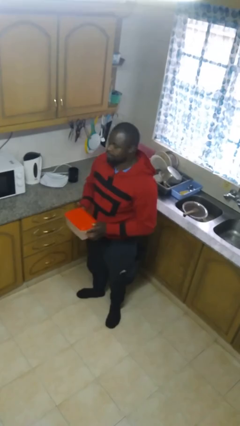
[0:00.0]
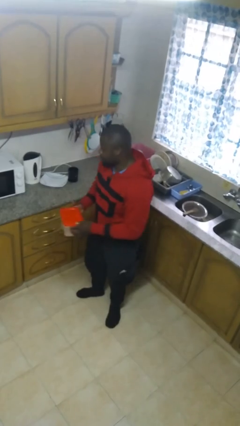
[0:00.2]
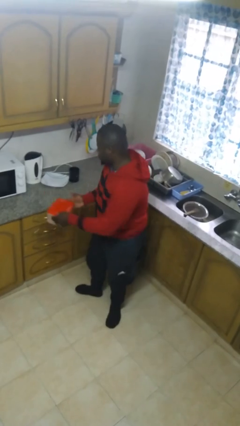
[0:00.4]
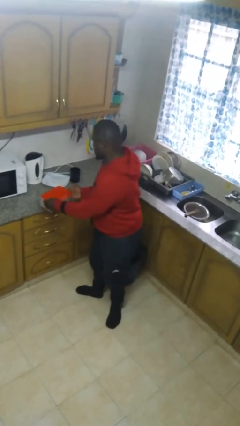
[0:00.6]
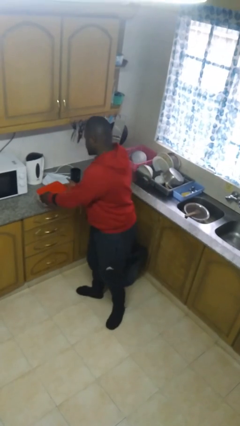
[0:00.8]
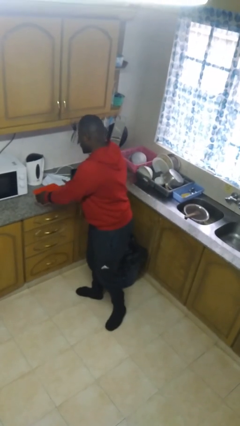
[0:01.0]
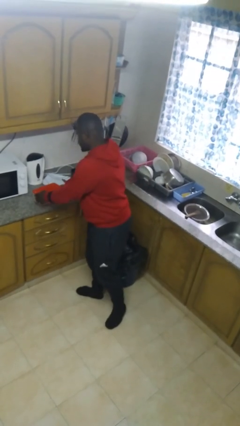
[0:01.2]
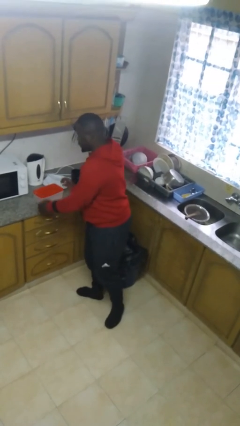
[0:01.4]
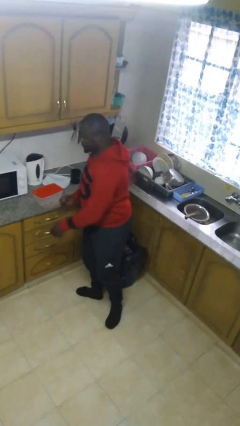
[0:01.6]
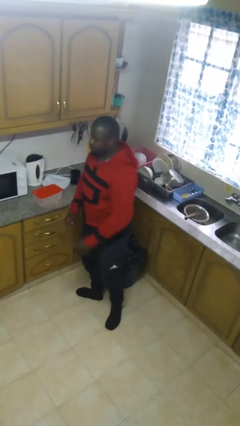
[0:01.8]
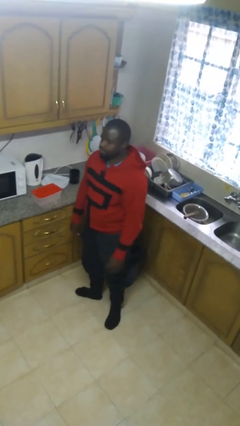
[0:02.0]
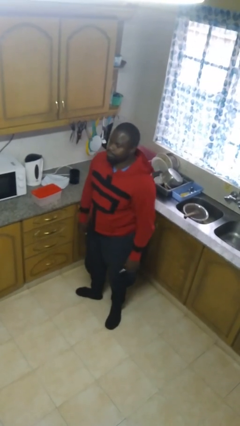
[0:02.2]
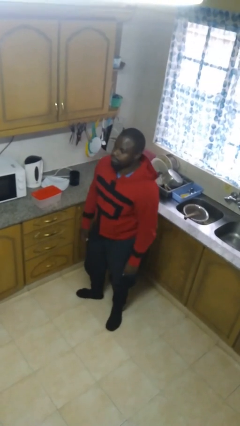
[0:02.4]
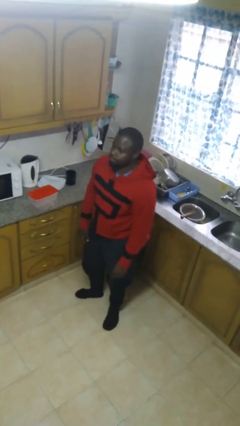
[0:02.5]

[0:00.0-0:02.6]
person puts down object on countertop

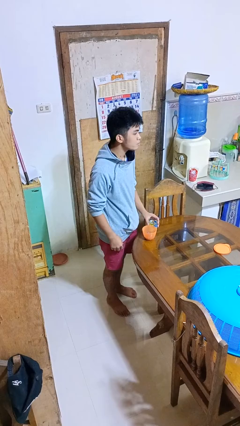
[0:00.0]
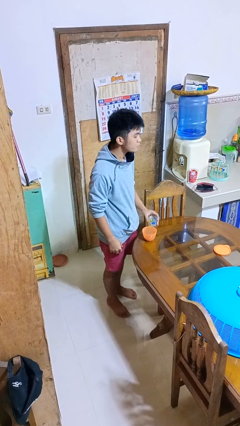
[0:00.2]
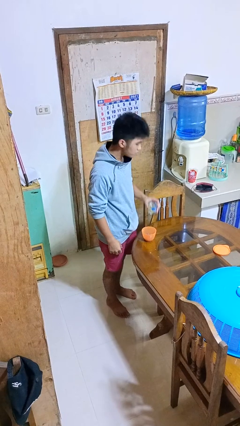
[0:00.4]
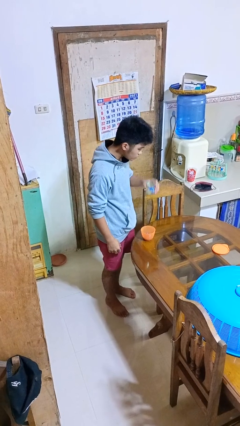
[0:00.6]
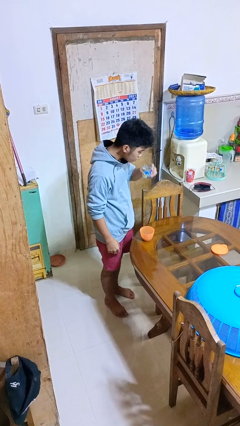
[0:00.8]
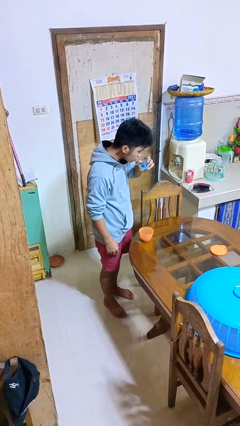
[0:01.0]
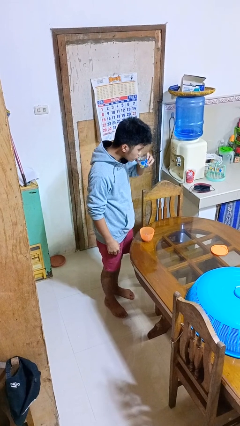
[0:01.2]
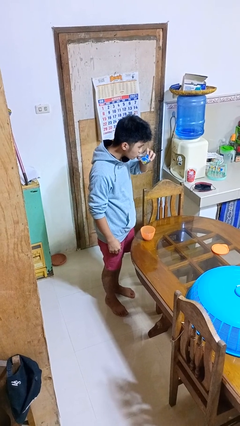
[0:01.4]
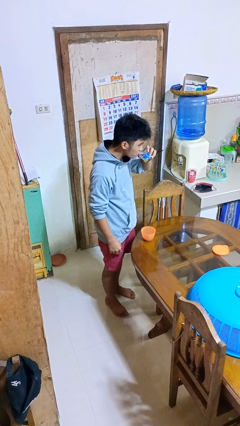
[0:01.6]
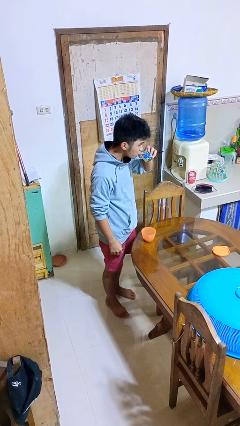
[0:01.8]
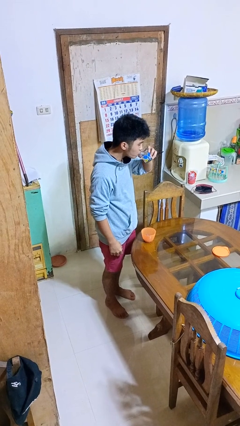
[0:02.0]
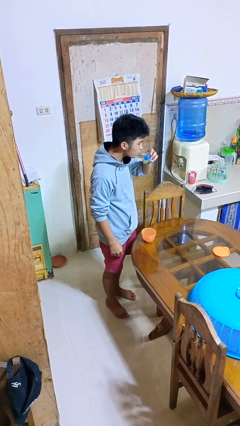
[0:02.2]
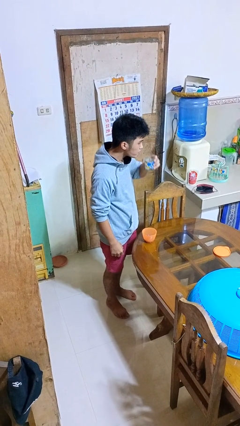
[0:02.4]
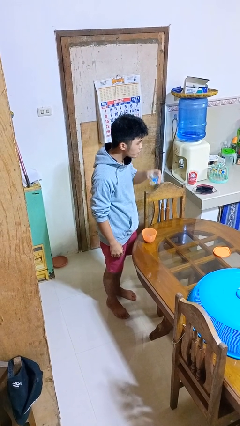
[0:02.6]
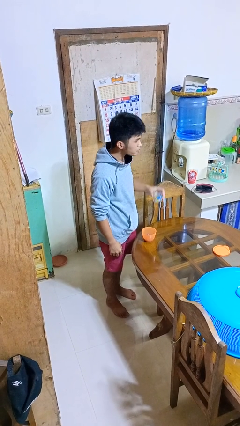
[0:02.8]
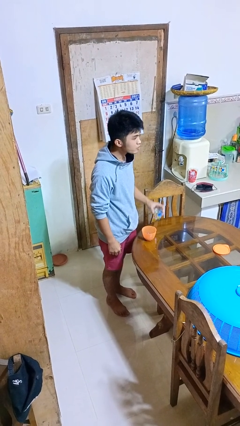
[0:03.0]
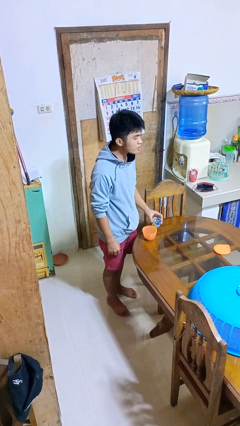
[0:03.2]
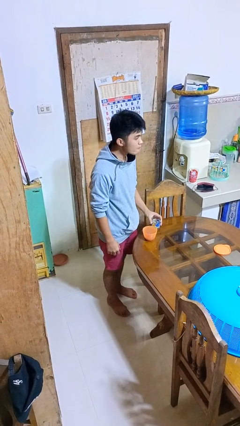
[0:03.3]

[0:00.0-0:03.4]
person drinks from cup

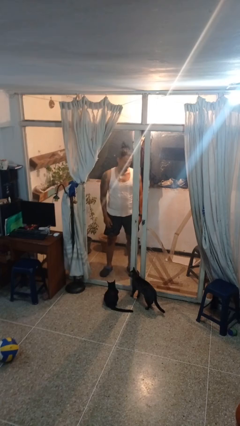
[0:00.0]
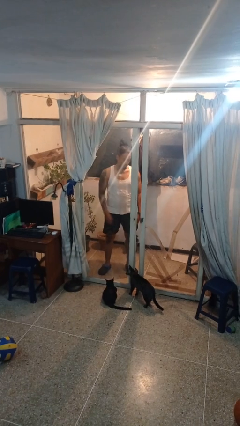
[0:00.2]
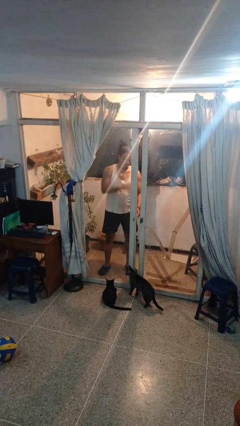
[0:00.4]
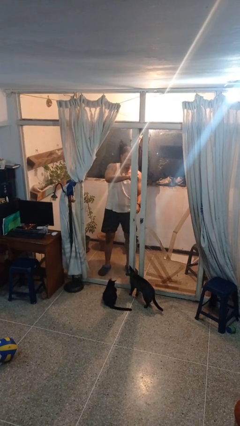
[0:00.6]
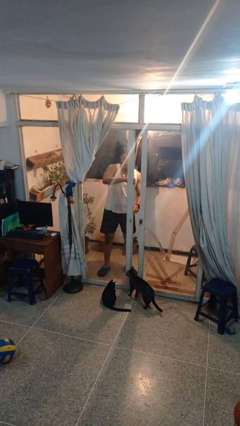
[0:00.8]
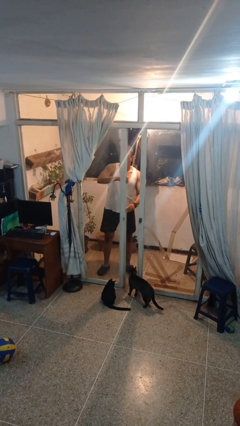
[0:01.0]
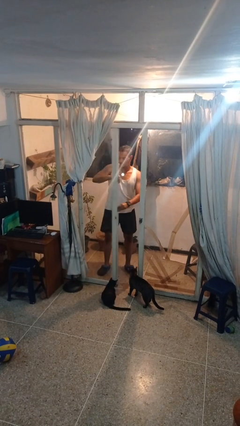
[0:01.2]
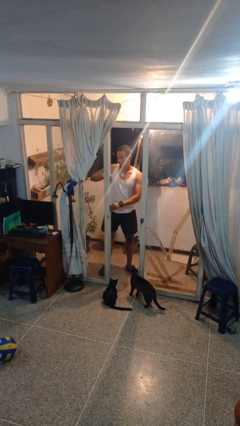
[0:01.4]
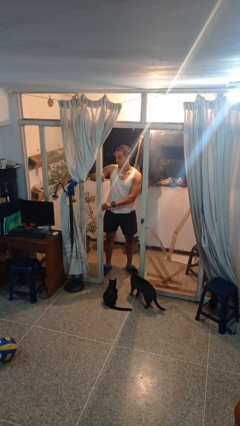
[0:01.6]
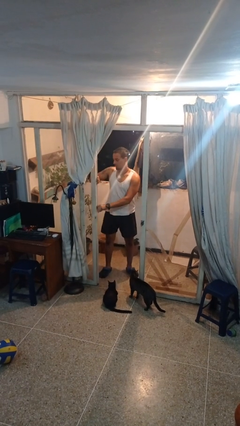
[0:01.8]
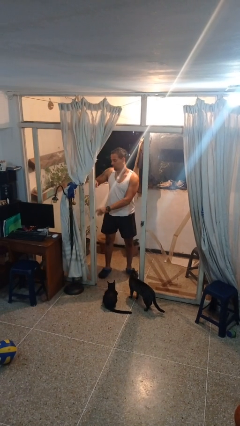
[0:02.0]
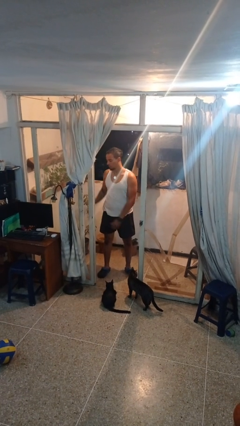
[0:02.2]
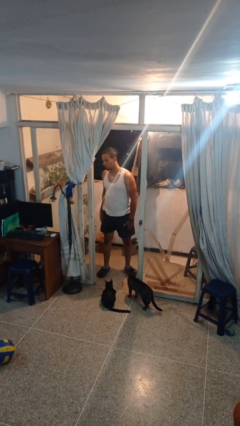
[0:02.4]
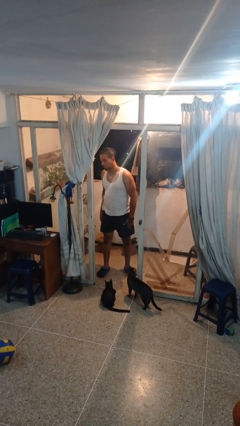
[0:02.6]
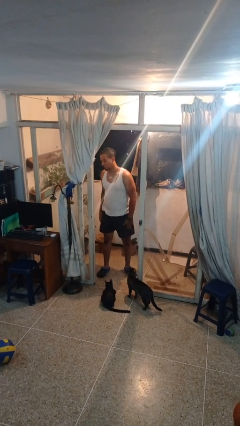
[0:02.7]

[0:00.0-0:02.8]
person opens sliding door

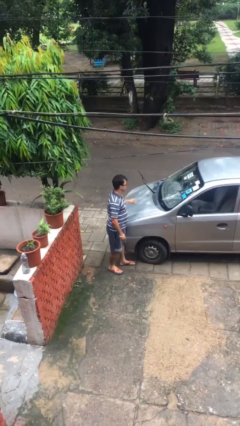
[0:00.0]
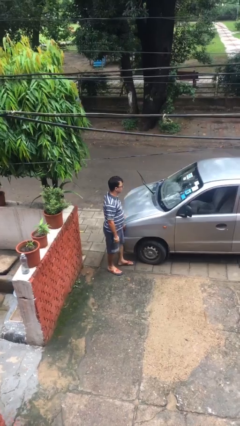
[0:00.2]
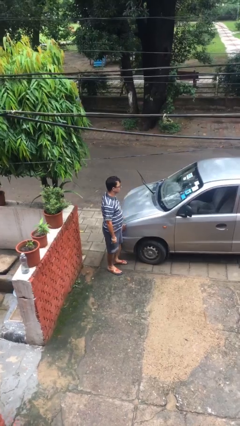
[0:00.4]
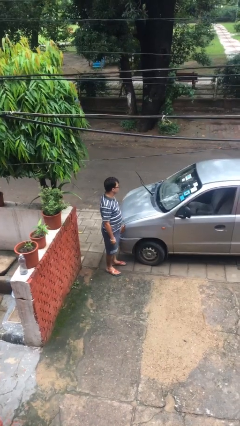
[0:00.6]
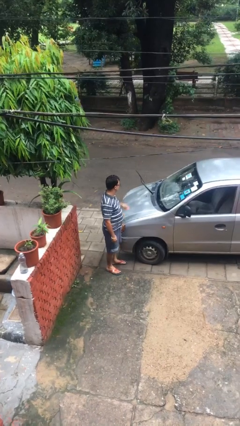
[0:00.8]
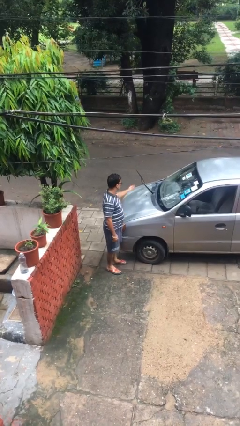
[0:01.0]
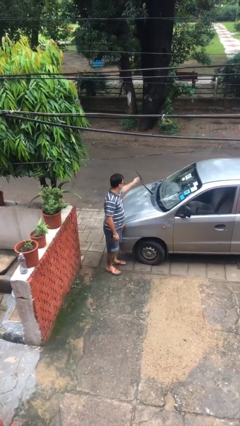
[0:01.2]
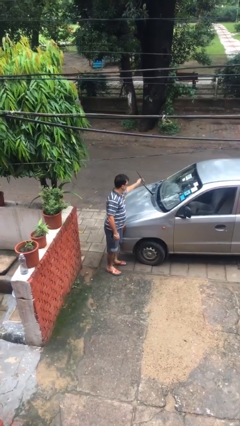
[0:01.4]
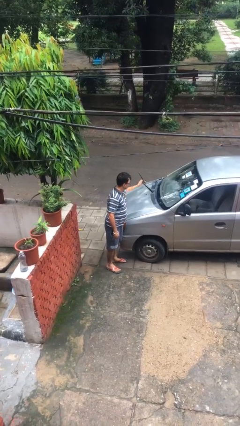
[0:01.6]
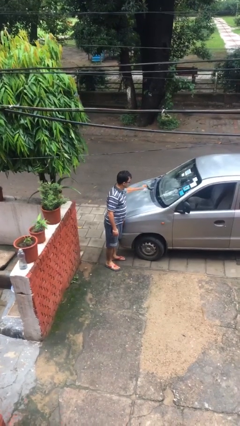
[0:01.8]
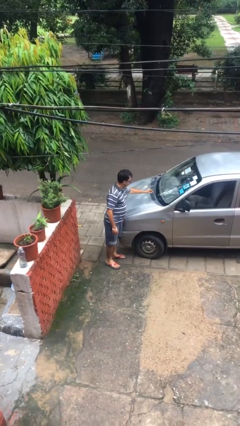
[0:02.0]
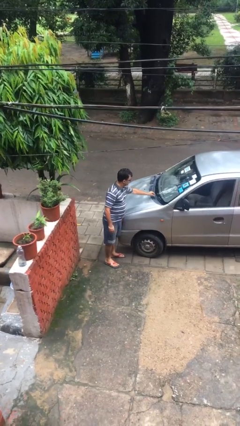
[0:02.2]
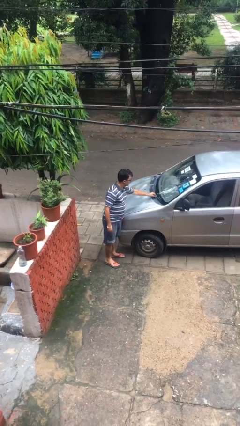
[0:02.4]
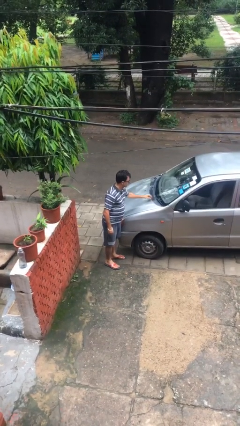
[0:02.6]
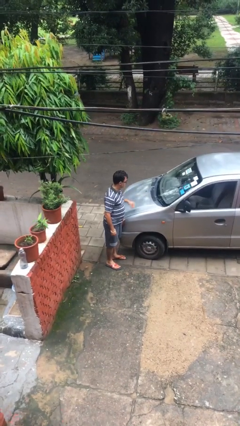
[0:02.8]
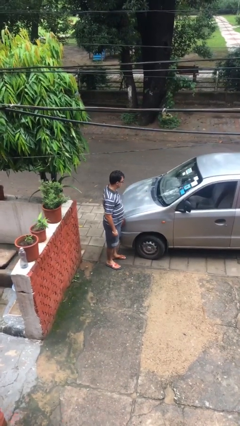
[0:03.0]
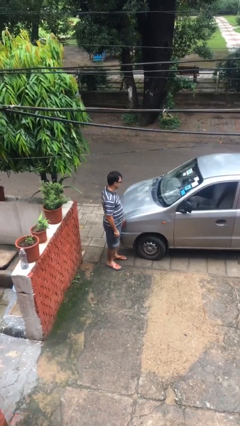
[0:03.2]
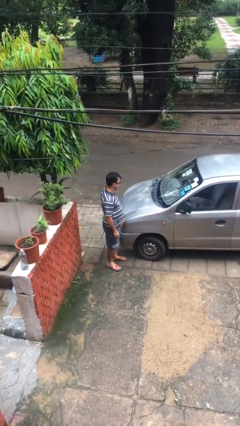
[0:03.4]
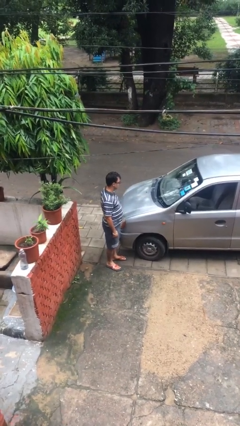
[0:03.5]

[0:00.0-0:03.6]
person flips down car wipers

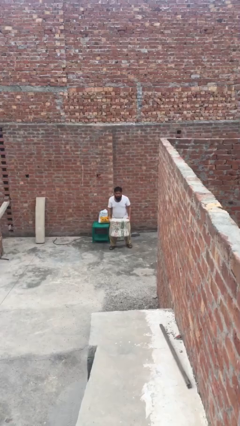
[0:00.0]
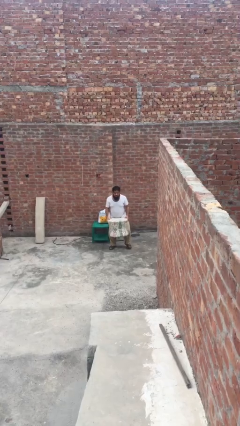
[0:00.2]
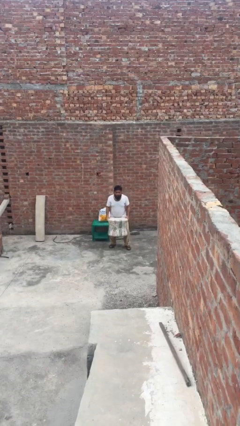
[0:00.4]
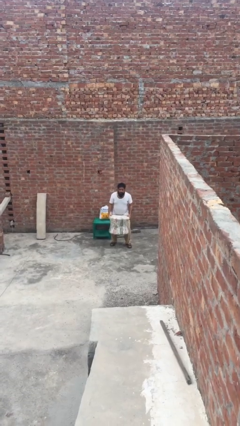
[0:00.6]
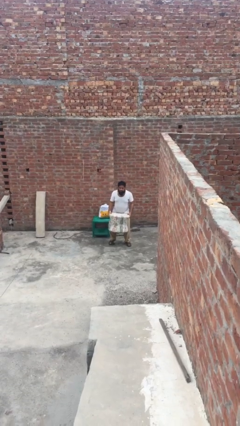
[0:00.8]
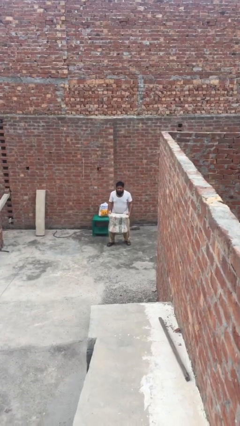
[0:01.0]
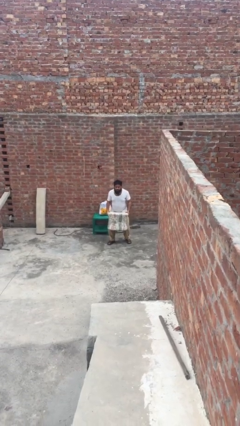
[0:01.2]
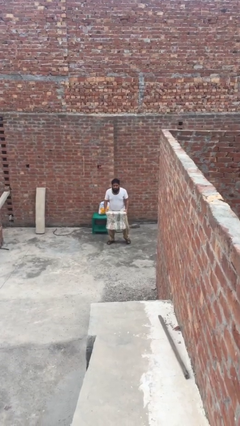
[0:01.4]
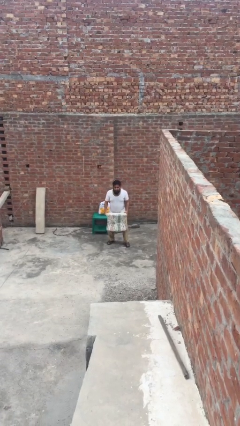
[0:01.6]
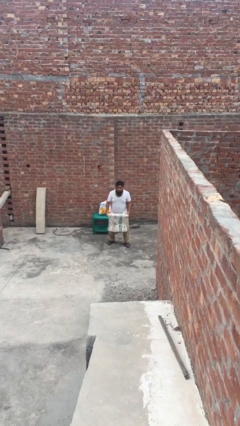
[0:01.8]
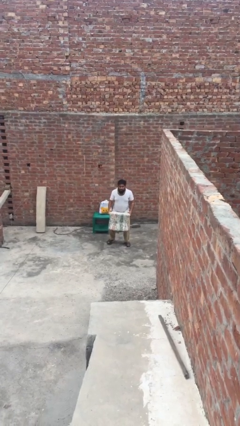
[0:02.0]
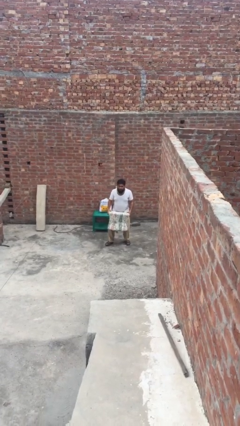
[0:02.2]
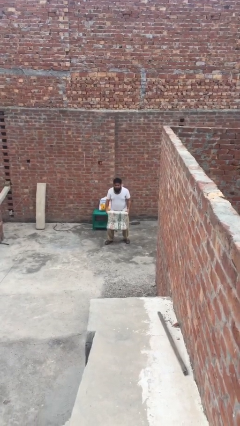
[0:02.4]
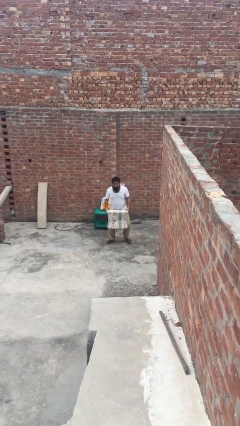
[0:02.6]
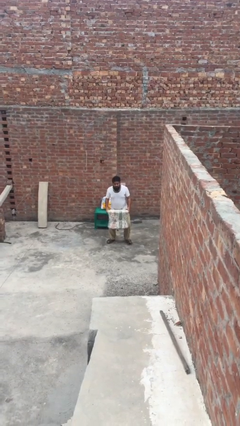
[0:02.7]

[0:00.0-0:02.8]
person carries heavy object

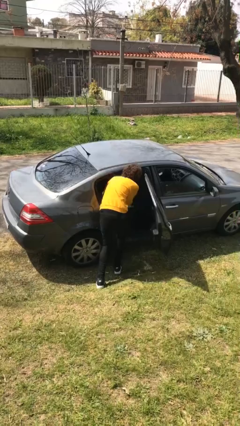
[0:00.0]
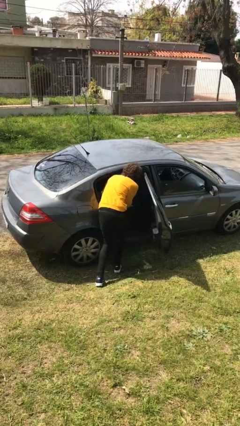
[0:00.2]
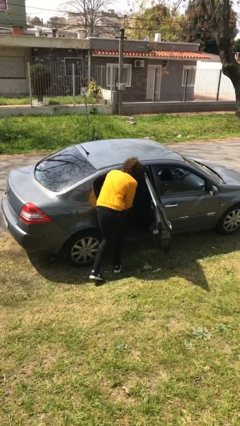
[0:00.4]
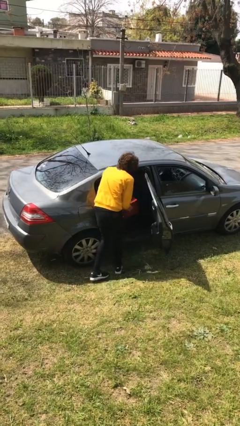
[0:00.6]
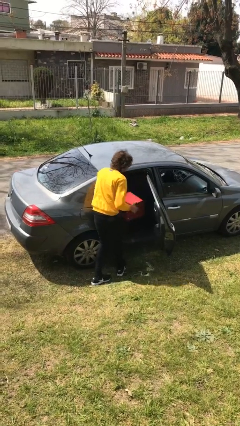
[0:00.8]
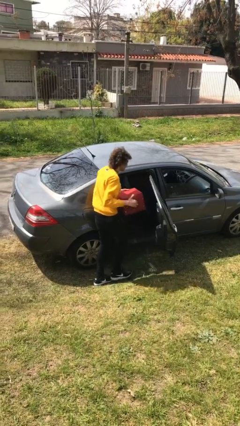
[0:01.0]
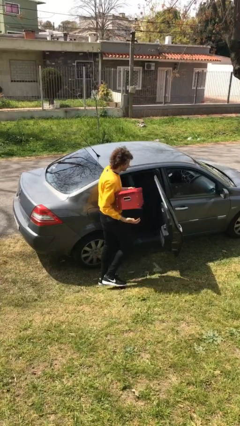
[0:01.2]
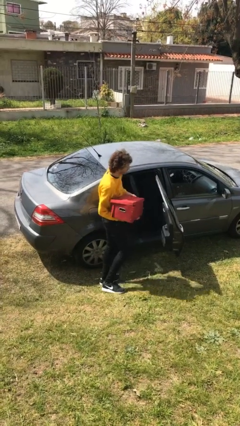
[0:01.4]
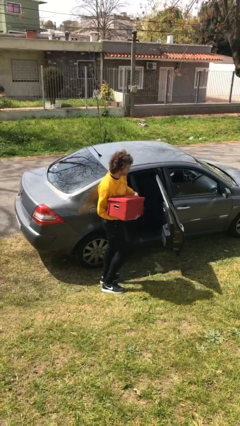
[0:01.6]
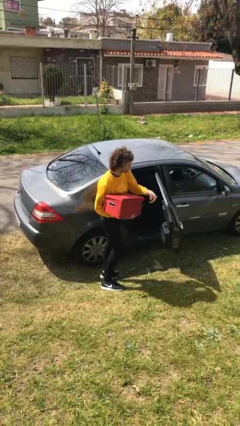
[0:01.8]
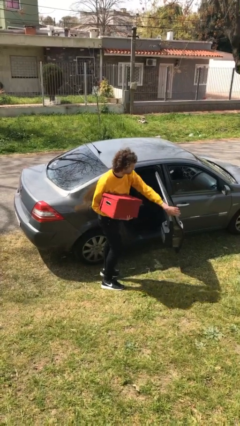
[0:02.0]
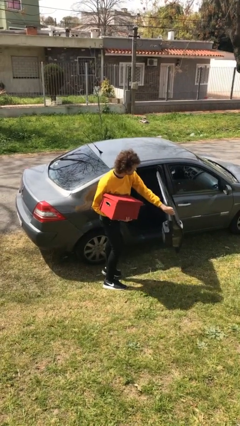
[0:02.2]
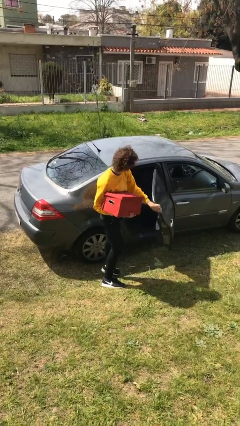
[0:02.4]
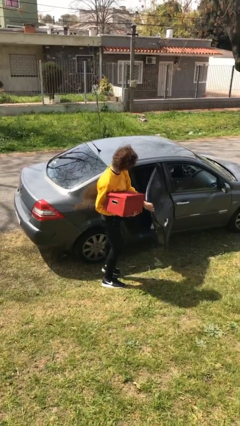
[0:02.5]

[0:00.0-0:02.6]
person unloads car
